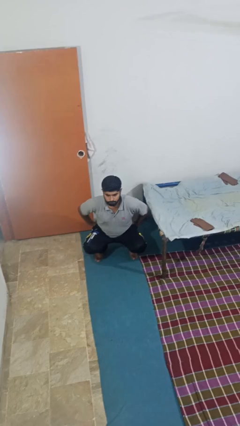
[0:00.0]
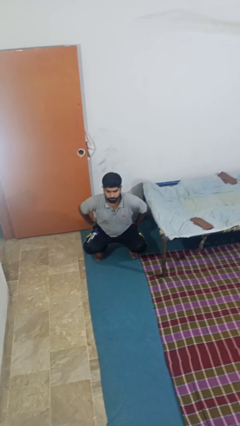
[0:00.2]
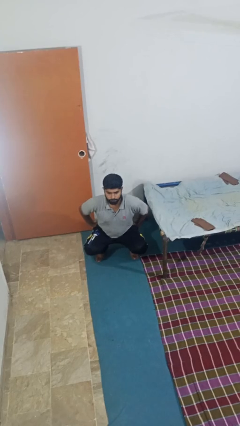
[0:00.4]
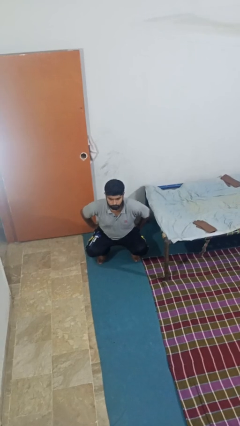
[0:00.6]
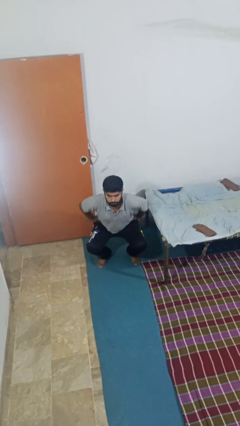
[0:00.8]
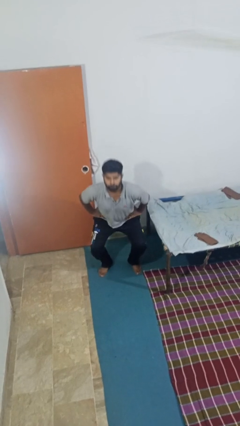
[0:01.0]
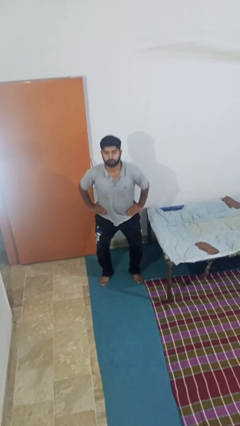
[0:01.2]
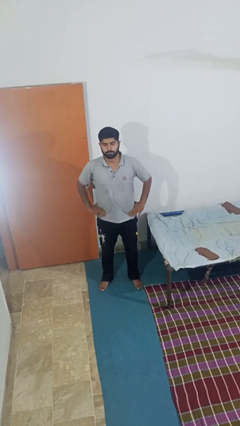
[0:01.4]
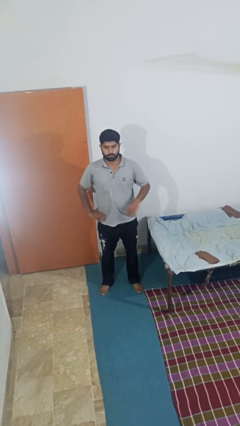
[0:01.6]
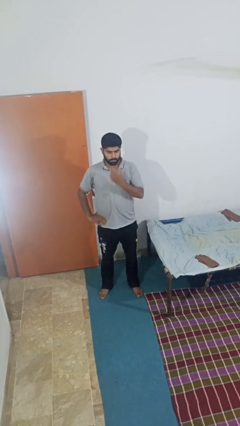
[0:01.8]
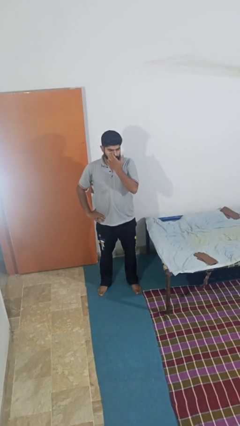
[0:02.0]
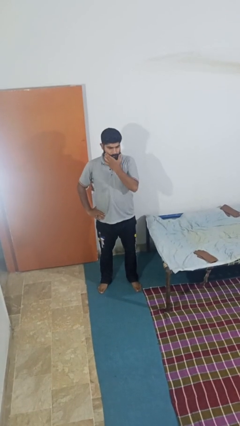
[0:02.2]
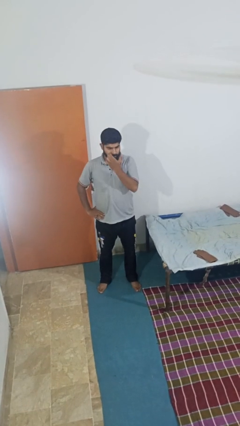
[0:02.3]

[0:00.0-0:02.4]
person stands up

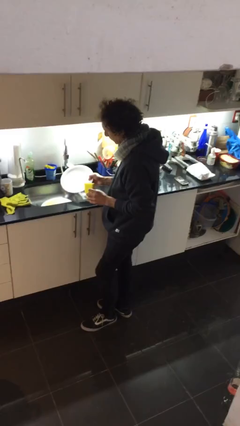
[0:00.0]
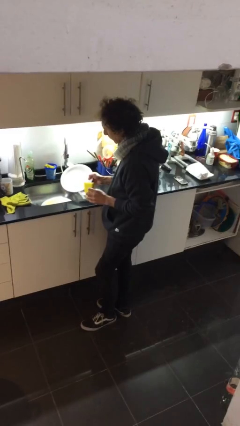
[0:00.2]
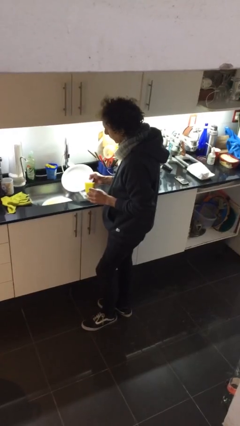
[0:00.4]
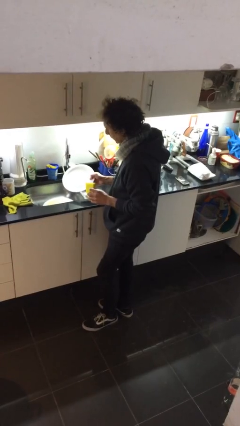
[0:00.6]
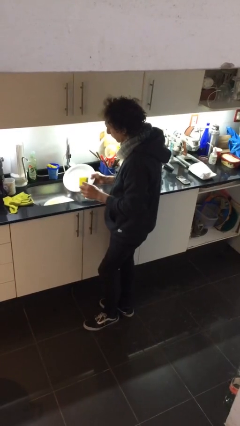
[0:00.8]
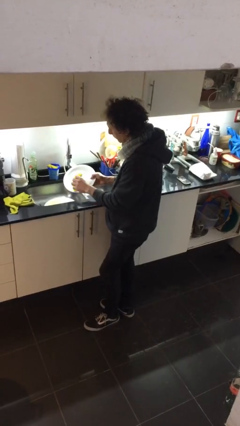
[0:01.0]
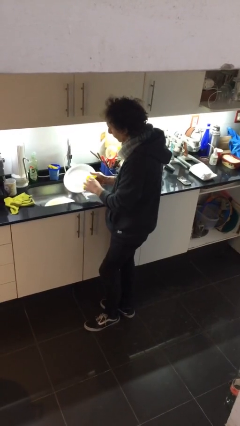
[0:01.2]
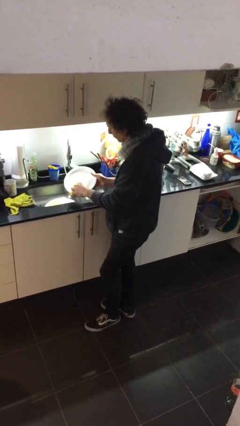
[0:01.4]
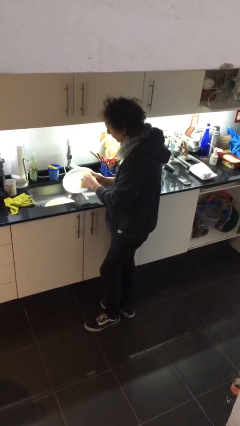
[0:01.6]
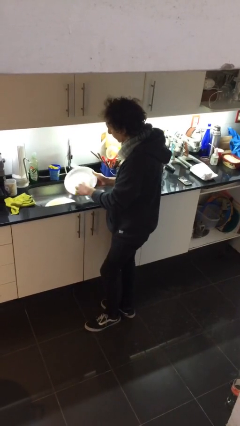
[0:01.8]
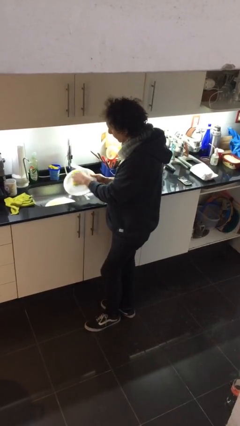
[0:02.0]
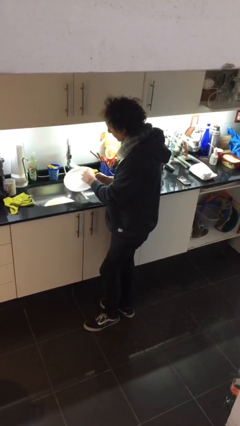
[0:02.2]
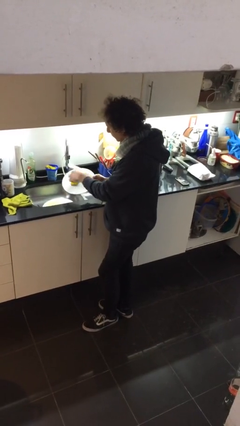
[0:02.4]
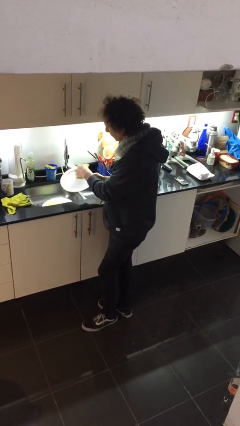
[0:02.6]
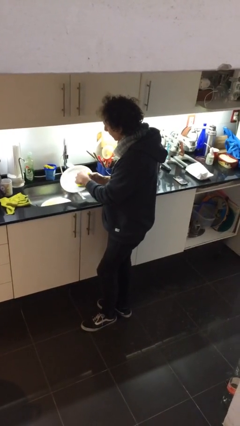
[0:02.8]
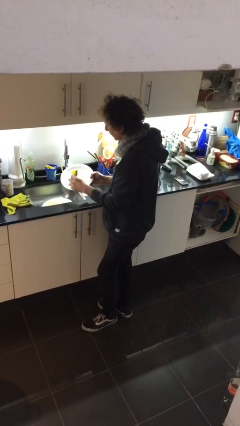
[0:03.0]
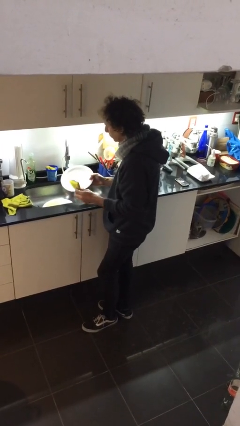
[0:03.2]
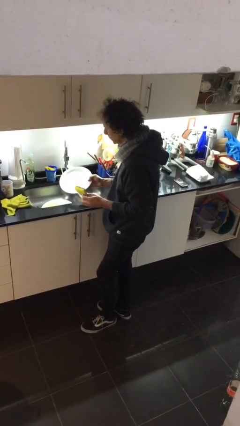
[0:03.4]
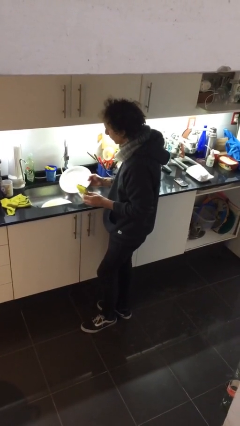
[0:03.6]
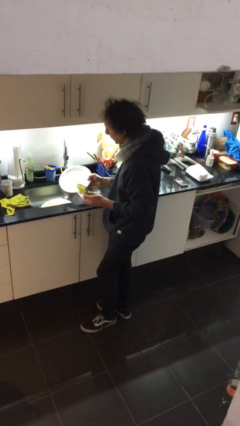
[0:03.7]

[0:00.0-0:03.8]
person washes dish

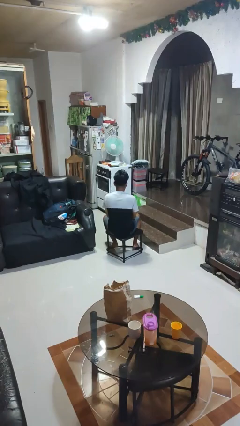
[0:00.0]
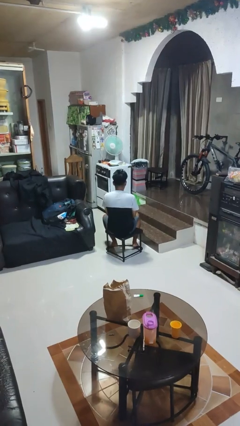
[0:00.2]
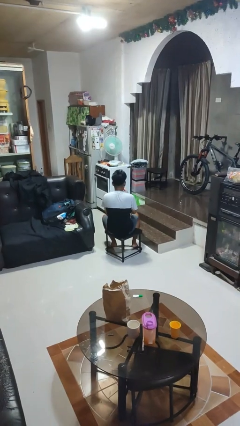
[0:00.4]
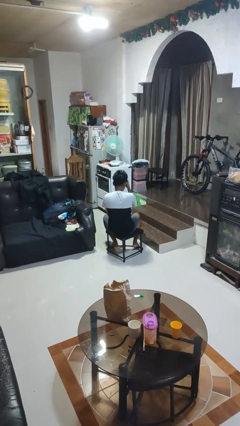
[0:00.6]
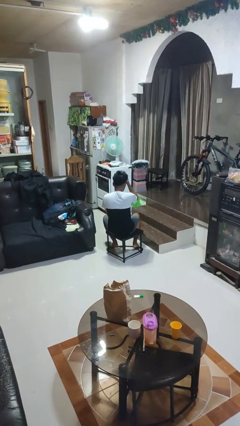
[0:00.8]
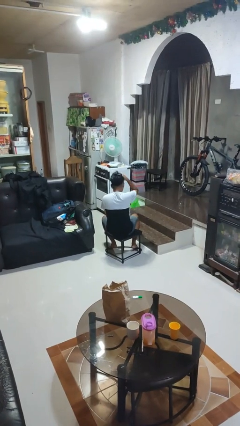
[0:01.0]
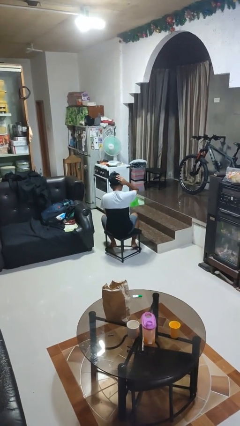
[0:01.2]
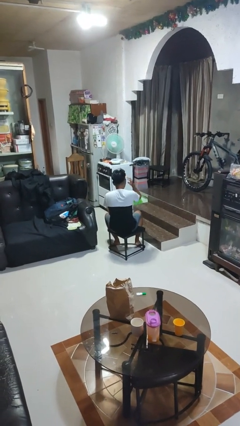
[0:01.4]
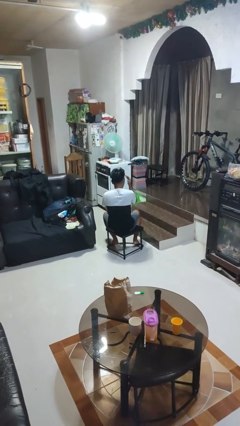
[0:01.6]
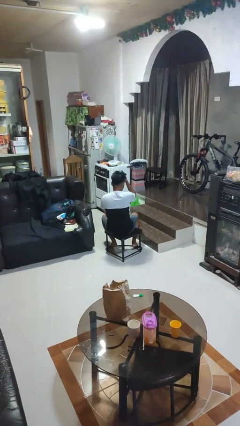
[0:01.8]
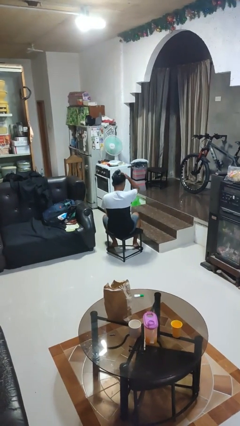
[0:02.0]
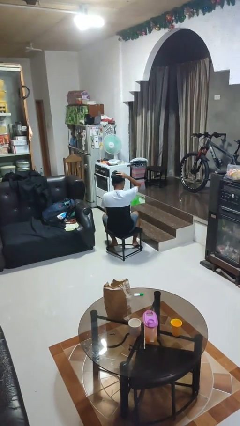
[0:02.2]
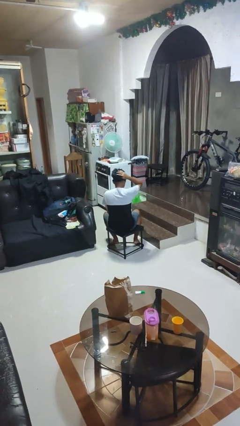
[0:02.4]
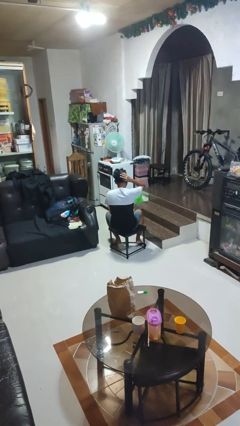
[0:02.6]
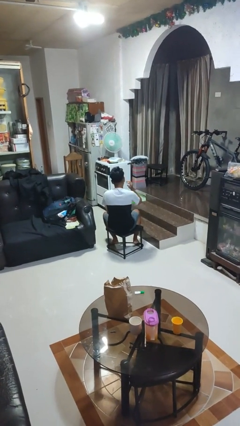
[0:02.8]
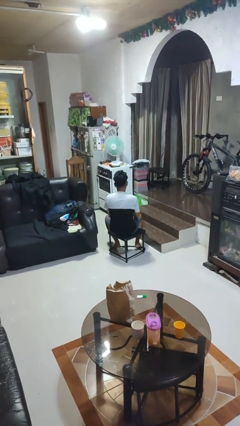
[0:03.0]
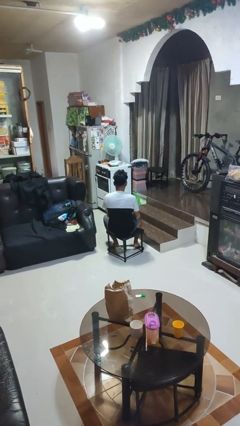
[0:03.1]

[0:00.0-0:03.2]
person strokes hair

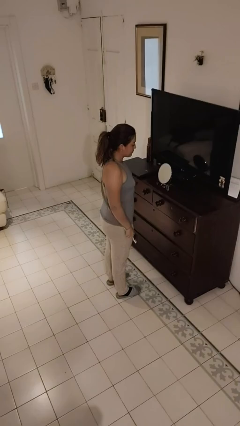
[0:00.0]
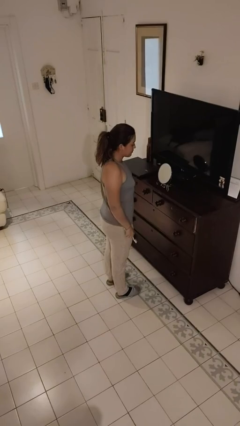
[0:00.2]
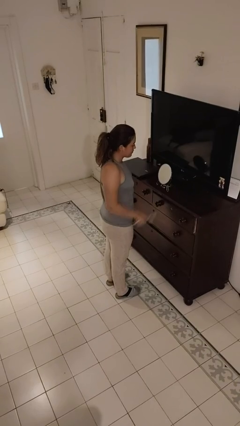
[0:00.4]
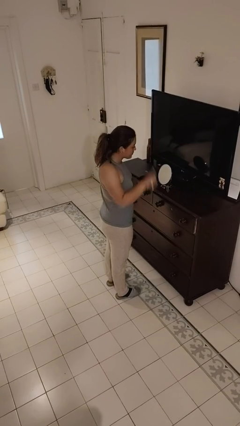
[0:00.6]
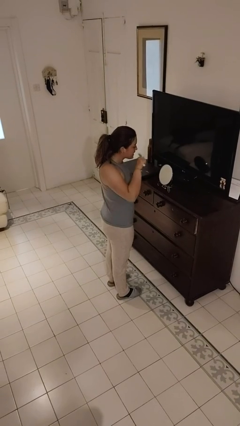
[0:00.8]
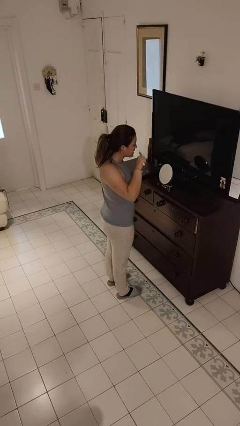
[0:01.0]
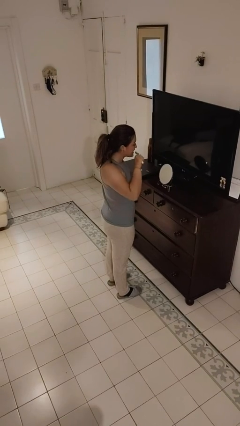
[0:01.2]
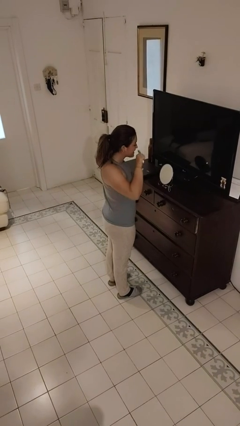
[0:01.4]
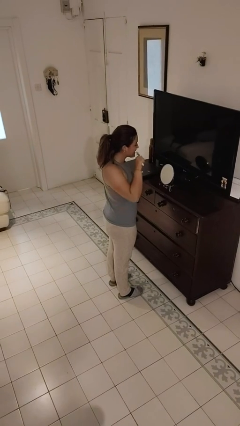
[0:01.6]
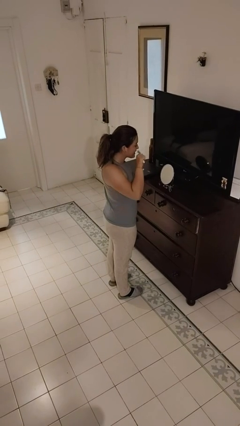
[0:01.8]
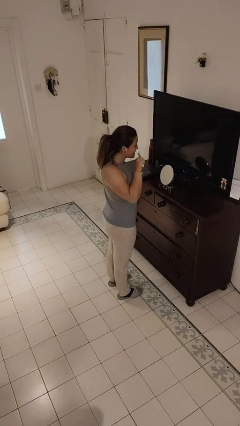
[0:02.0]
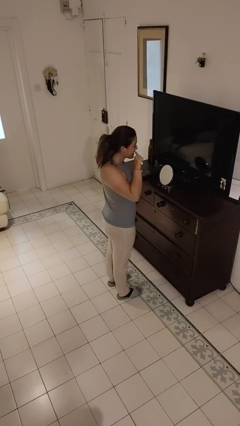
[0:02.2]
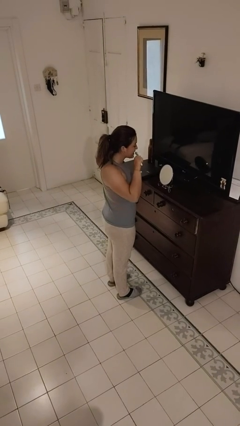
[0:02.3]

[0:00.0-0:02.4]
person brushes teeth

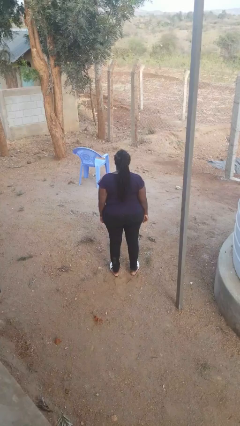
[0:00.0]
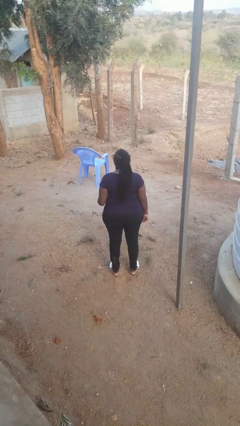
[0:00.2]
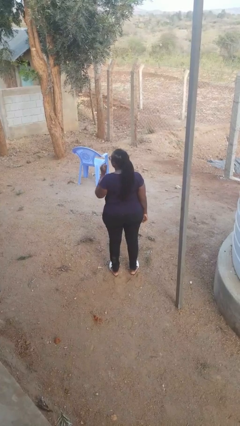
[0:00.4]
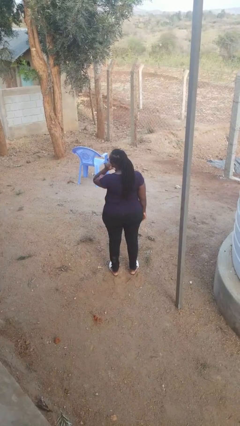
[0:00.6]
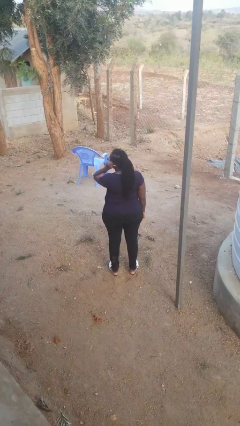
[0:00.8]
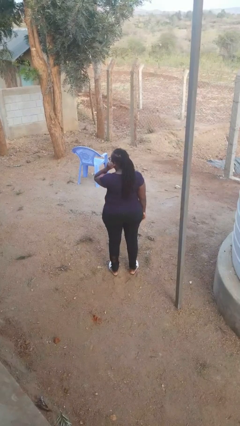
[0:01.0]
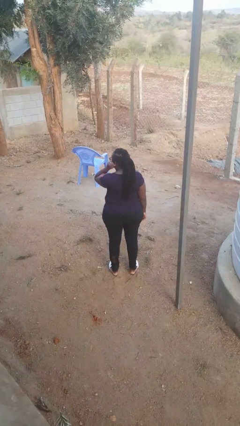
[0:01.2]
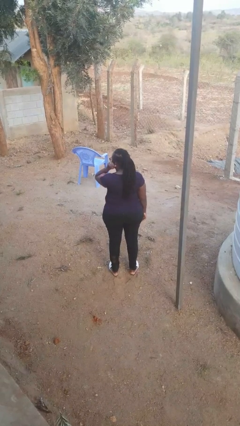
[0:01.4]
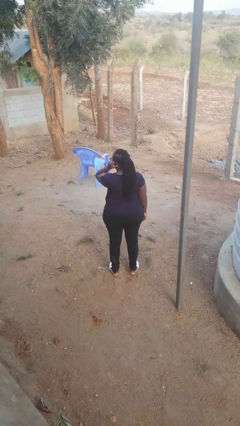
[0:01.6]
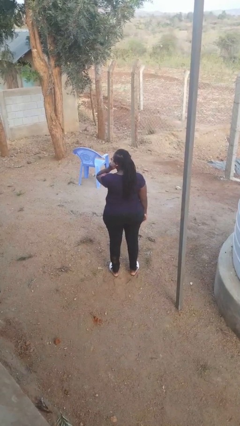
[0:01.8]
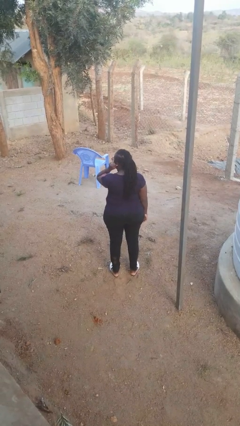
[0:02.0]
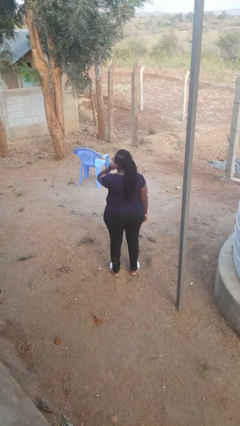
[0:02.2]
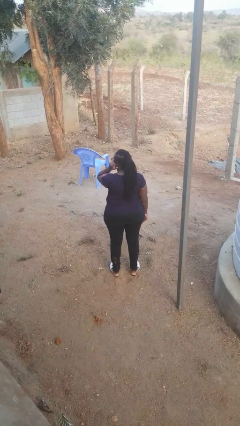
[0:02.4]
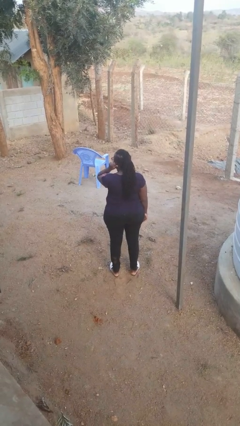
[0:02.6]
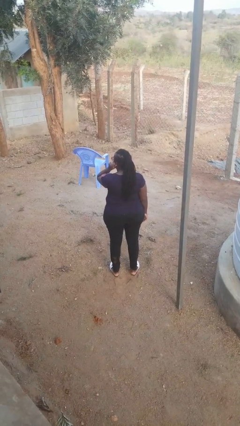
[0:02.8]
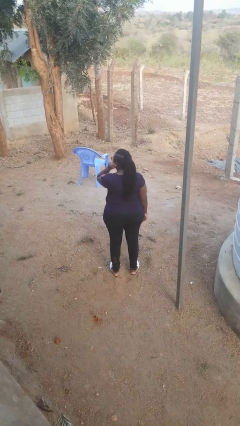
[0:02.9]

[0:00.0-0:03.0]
person touches earlobe

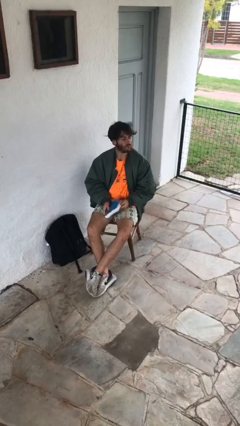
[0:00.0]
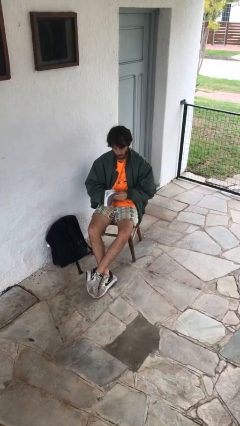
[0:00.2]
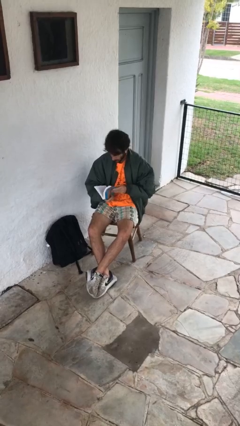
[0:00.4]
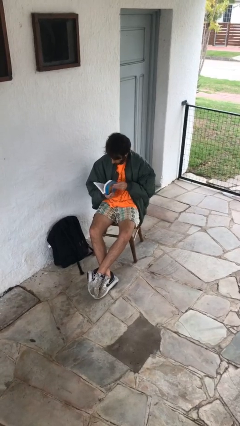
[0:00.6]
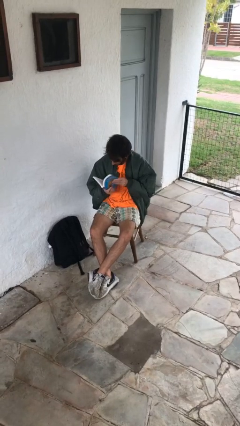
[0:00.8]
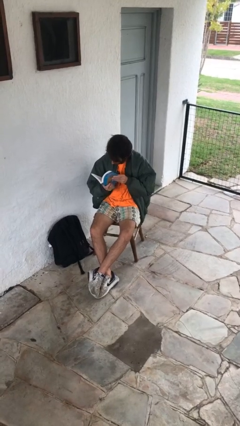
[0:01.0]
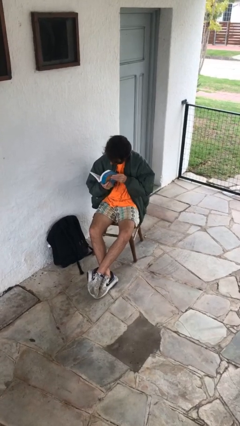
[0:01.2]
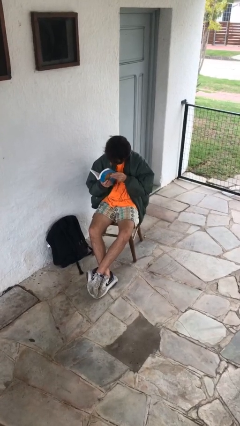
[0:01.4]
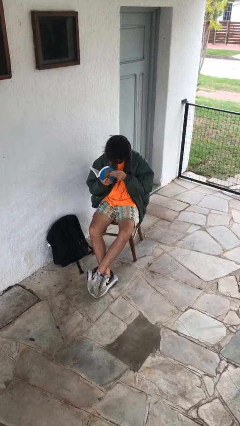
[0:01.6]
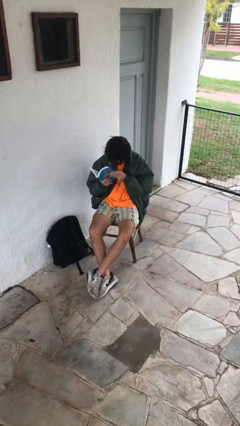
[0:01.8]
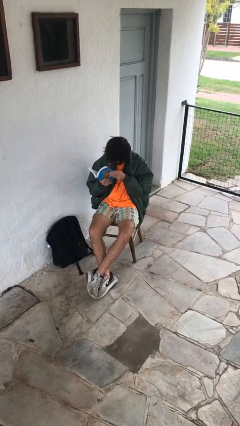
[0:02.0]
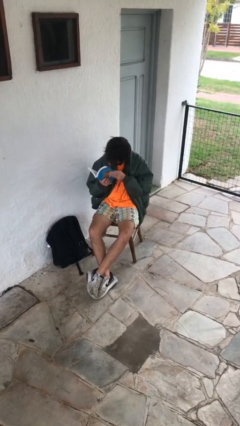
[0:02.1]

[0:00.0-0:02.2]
person reads document
